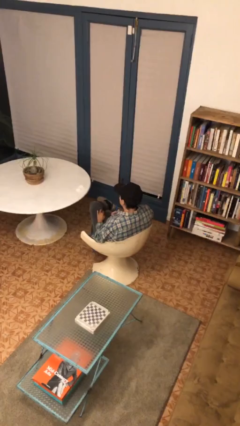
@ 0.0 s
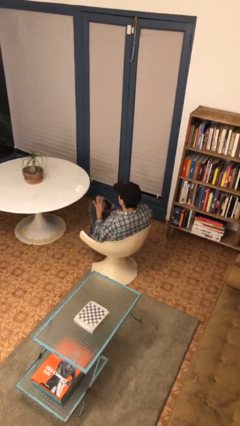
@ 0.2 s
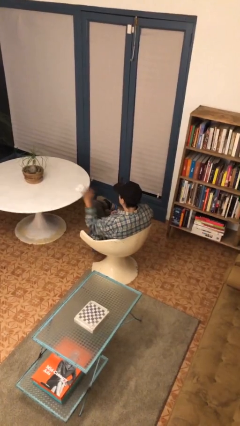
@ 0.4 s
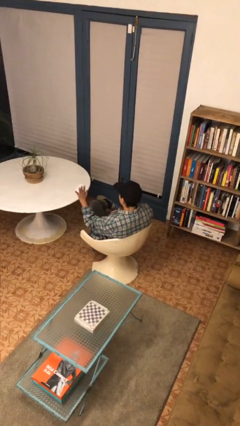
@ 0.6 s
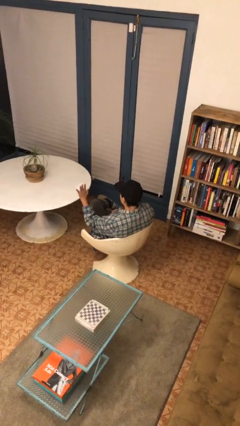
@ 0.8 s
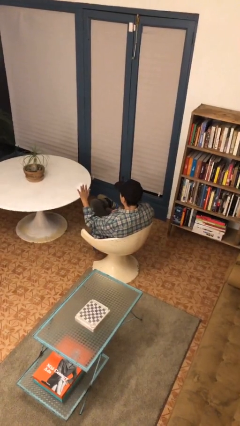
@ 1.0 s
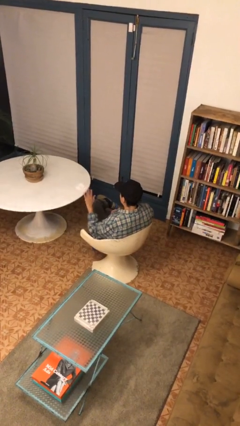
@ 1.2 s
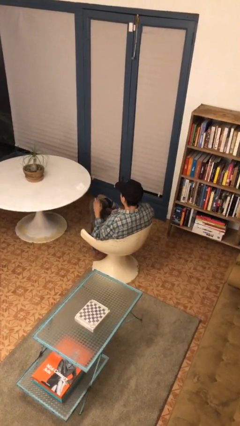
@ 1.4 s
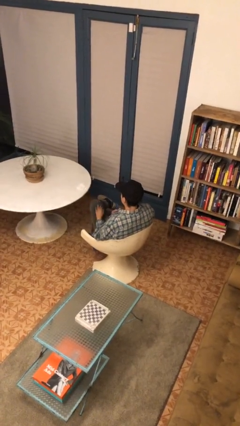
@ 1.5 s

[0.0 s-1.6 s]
person gestures stop

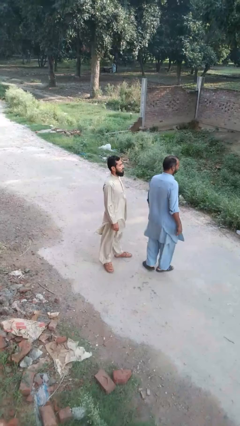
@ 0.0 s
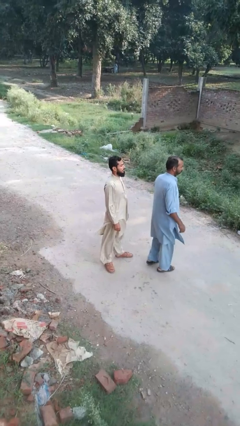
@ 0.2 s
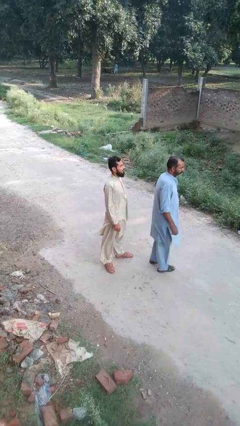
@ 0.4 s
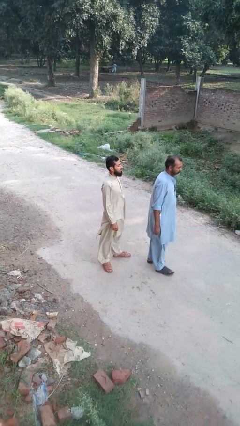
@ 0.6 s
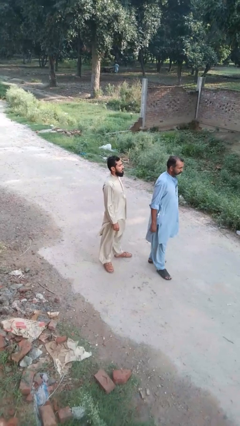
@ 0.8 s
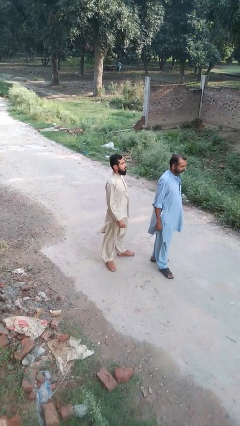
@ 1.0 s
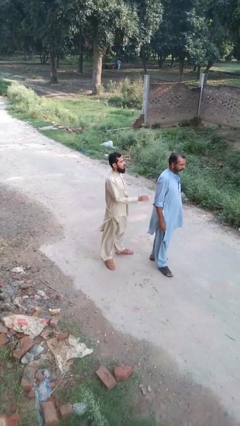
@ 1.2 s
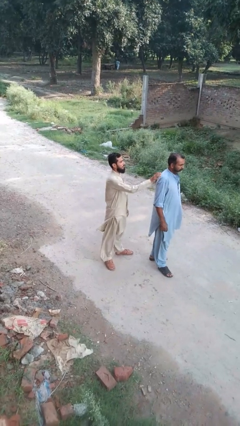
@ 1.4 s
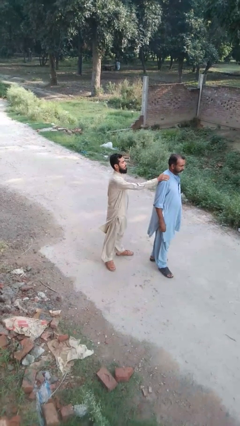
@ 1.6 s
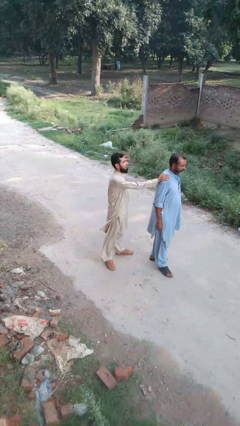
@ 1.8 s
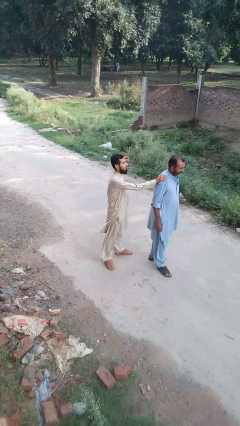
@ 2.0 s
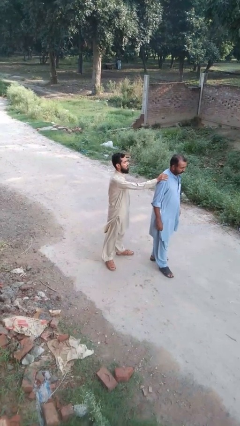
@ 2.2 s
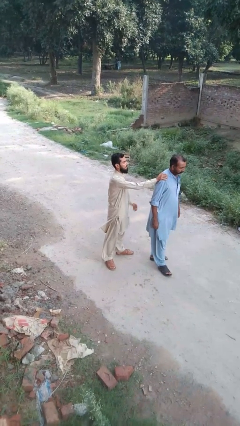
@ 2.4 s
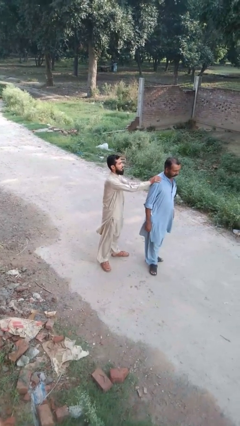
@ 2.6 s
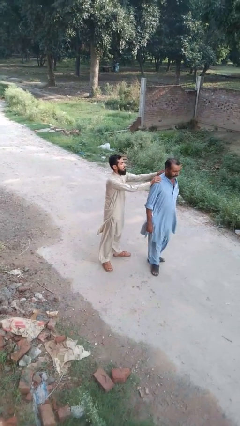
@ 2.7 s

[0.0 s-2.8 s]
person grabs person by shoulder

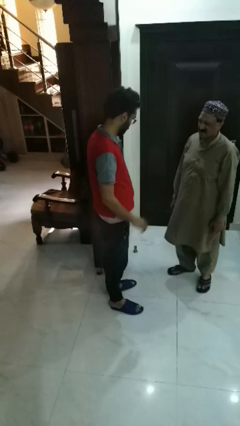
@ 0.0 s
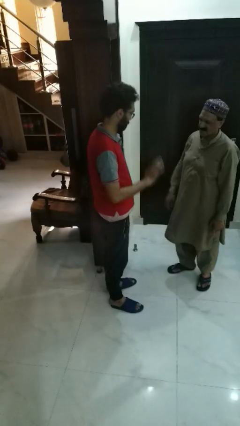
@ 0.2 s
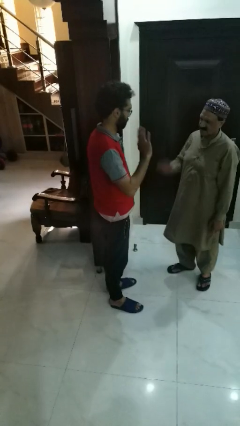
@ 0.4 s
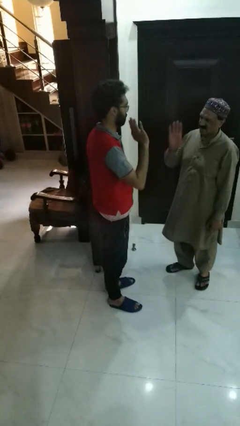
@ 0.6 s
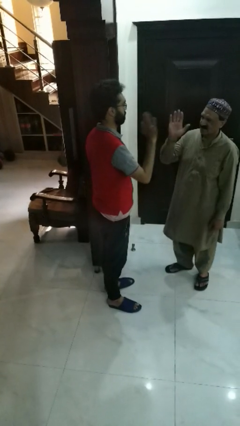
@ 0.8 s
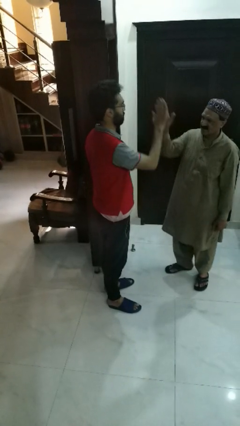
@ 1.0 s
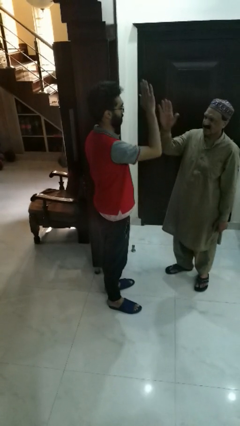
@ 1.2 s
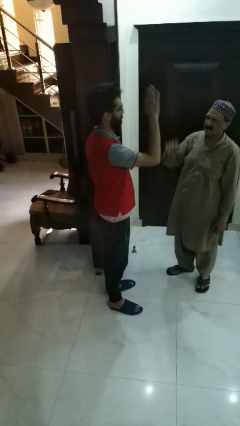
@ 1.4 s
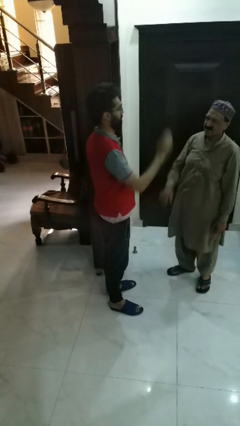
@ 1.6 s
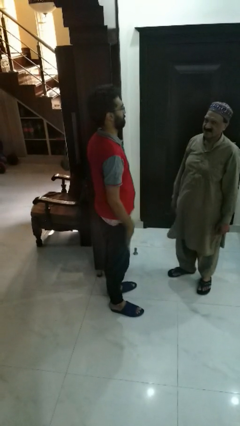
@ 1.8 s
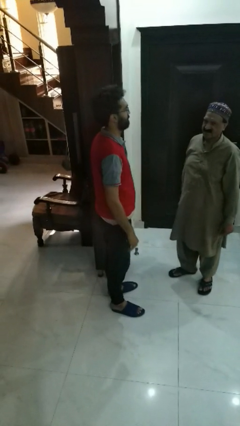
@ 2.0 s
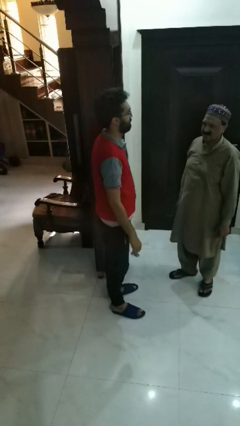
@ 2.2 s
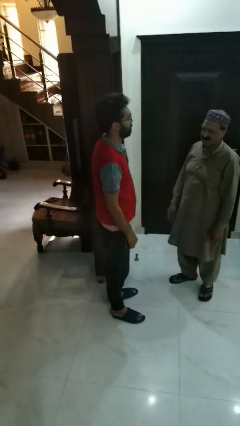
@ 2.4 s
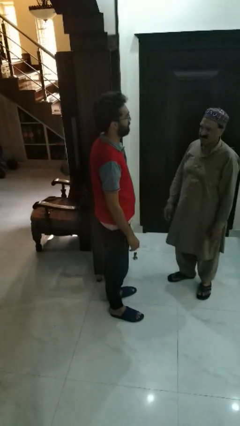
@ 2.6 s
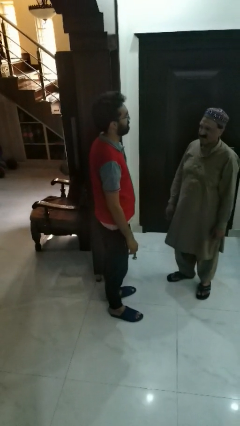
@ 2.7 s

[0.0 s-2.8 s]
person highfives hand

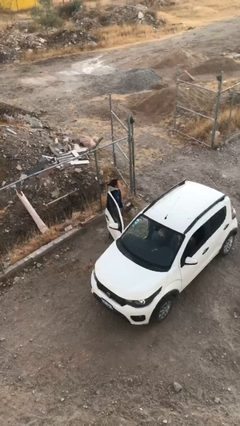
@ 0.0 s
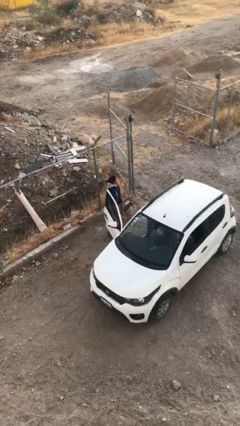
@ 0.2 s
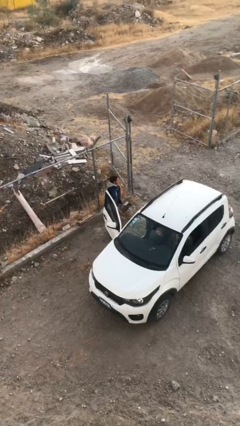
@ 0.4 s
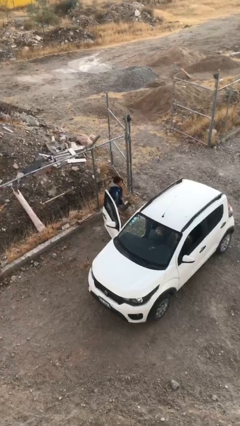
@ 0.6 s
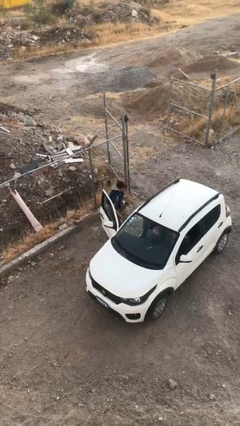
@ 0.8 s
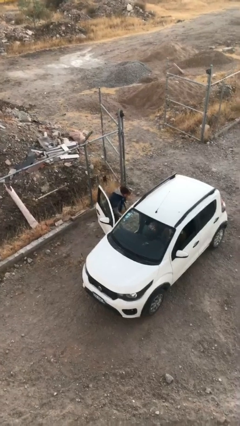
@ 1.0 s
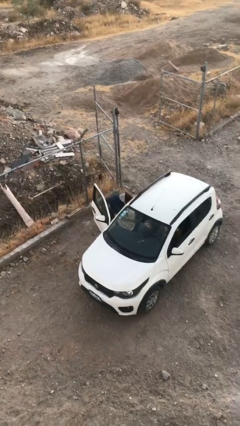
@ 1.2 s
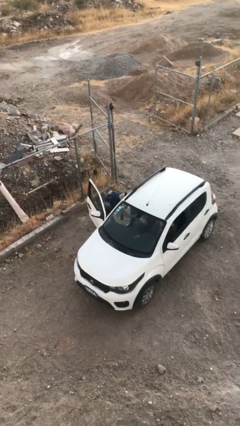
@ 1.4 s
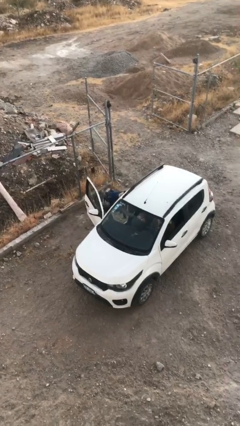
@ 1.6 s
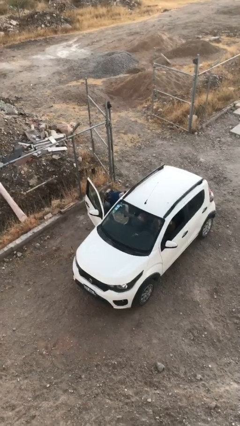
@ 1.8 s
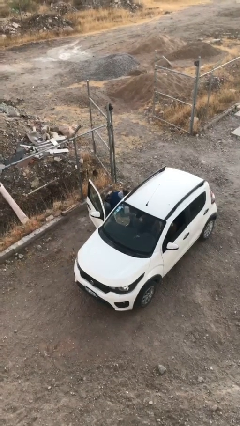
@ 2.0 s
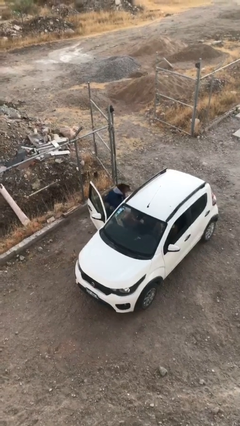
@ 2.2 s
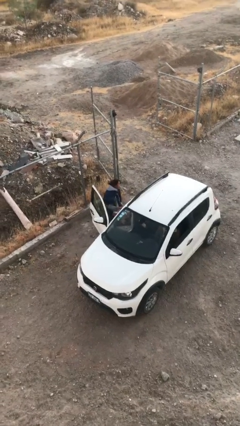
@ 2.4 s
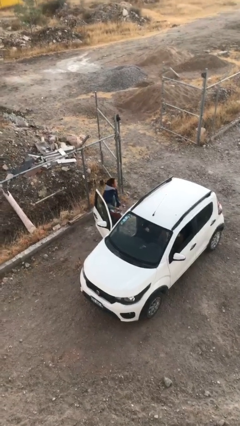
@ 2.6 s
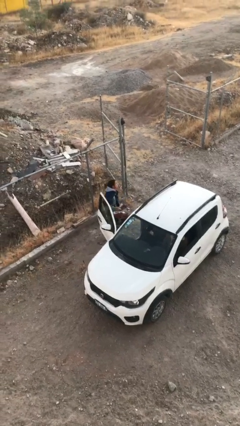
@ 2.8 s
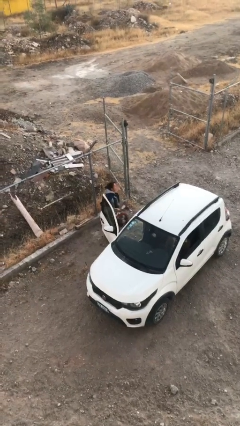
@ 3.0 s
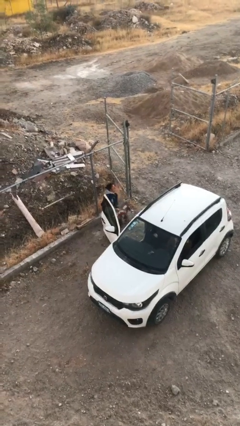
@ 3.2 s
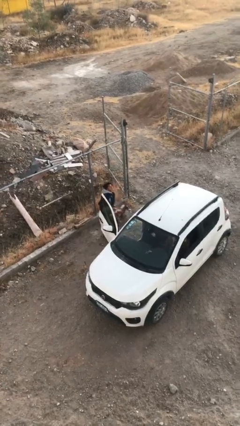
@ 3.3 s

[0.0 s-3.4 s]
person unloads car

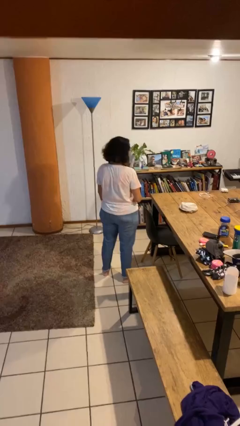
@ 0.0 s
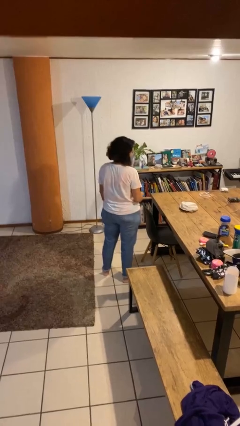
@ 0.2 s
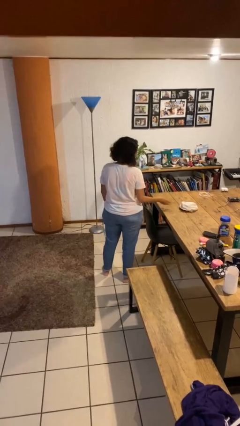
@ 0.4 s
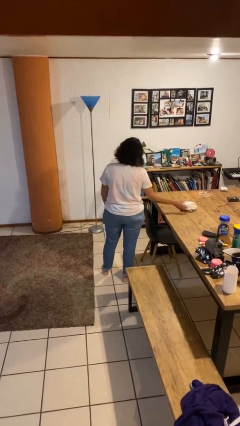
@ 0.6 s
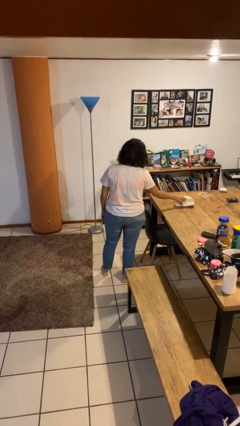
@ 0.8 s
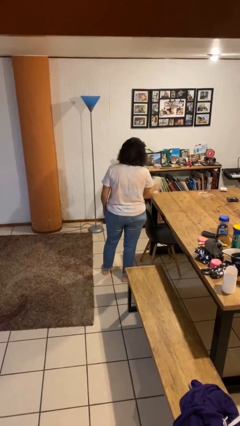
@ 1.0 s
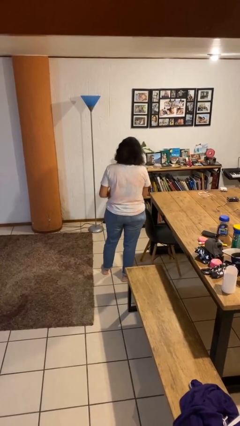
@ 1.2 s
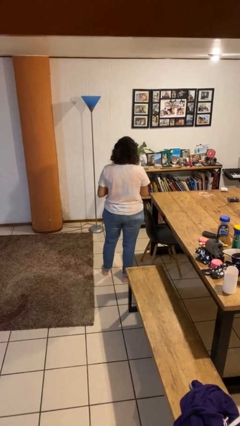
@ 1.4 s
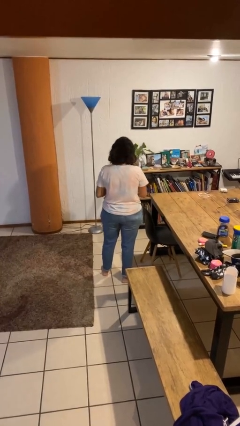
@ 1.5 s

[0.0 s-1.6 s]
person picks up object from table

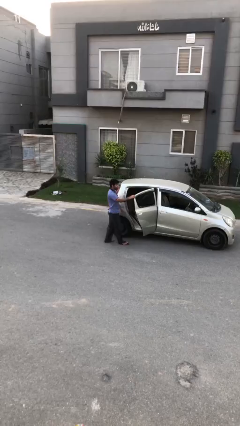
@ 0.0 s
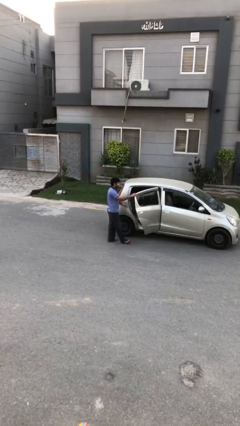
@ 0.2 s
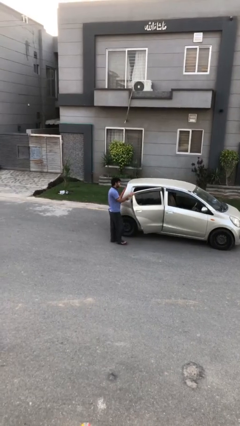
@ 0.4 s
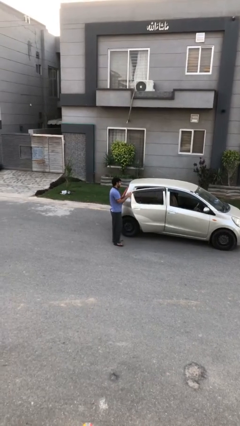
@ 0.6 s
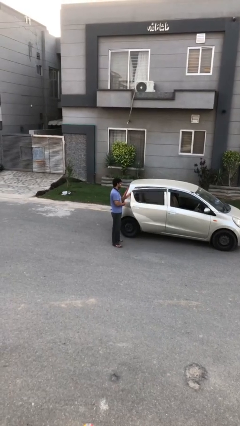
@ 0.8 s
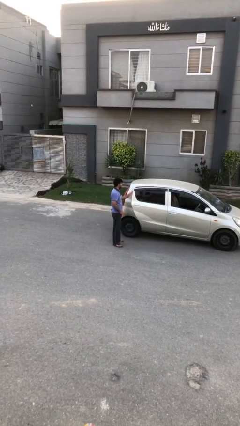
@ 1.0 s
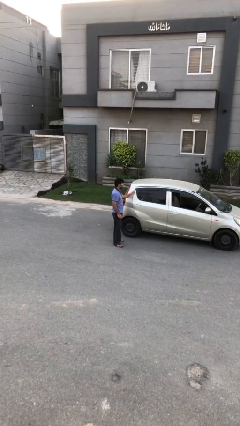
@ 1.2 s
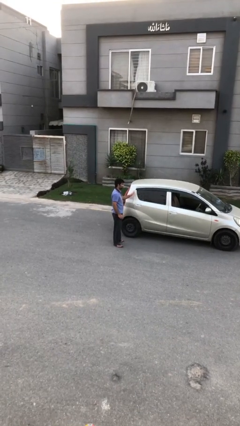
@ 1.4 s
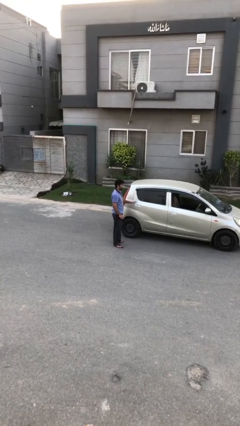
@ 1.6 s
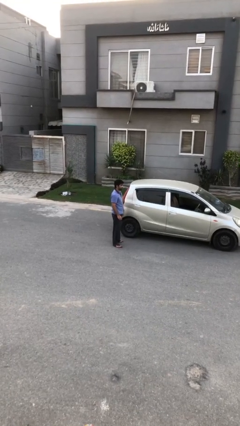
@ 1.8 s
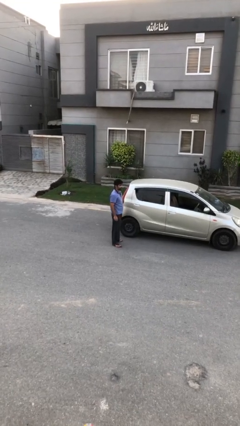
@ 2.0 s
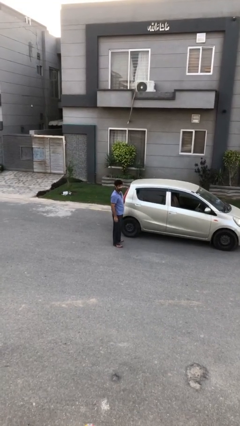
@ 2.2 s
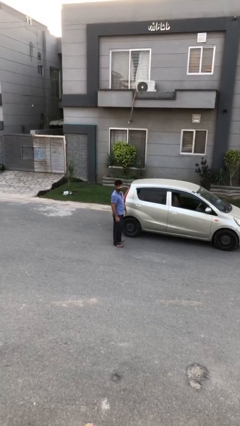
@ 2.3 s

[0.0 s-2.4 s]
person closes car door

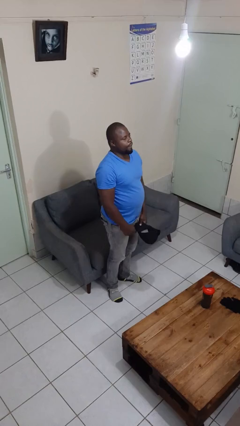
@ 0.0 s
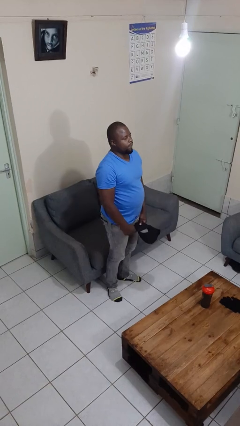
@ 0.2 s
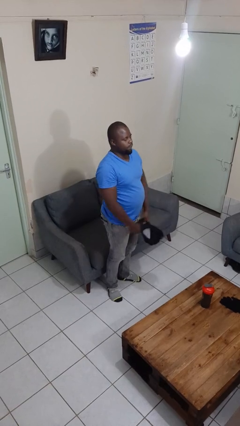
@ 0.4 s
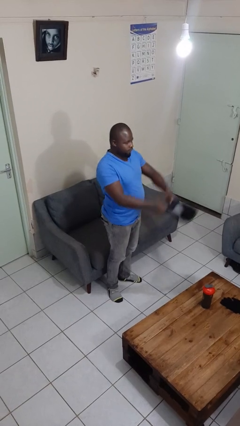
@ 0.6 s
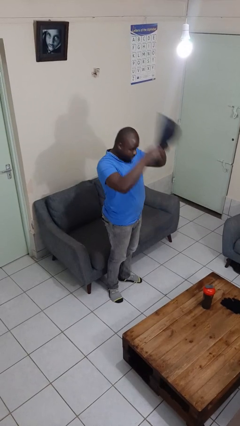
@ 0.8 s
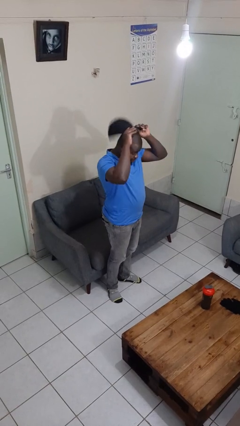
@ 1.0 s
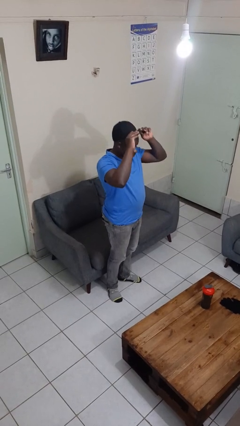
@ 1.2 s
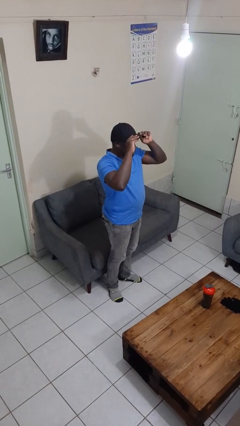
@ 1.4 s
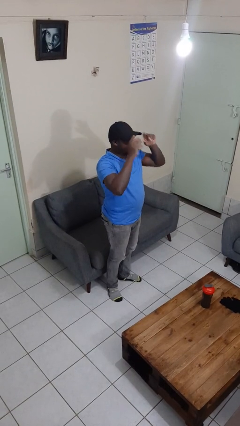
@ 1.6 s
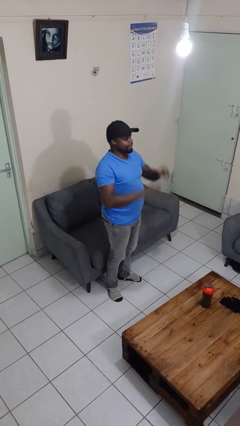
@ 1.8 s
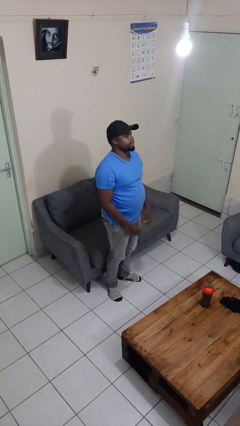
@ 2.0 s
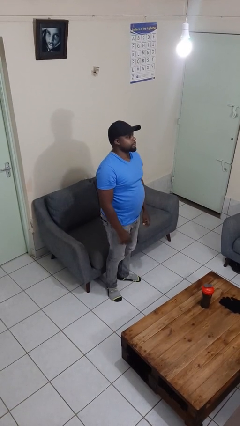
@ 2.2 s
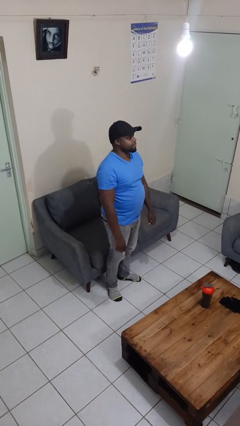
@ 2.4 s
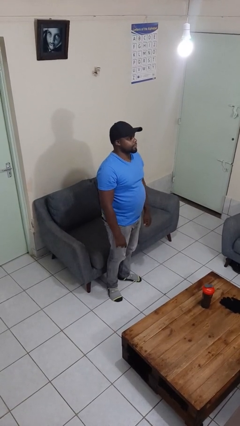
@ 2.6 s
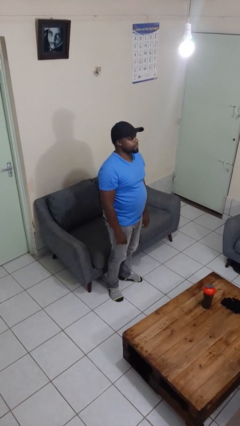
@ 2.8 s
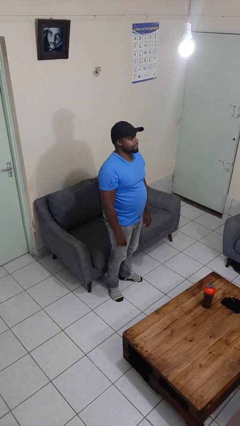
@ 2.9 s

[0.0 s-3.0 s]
person puts on hat
